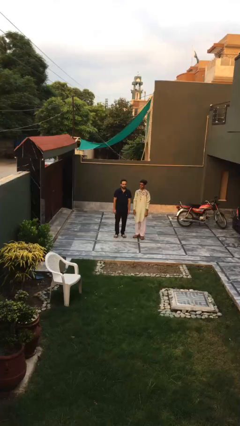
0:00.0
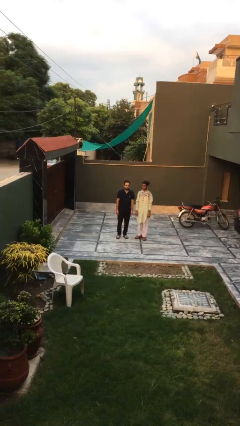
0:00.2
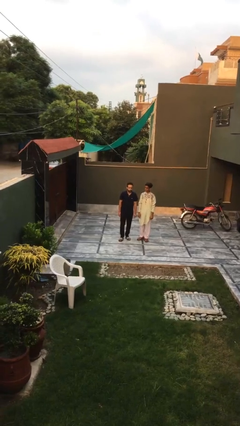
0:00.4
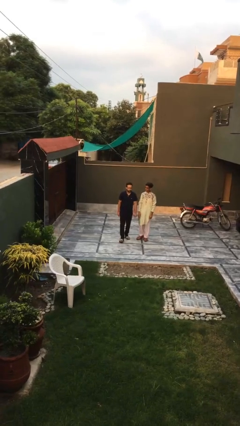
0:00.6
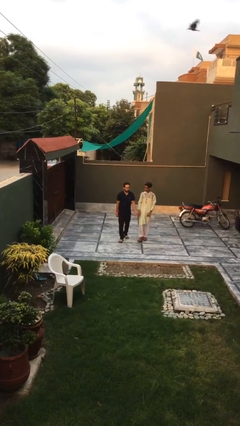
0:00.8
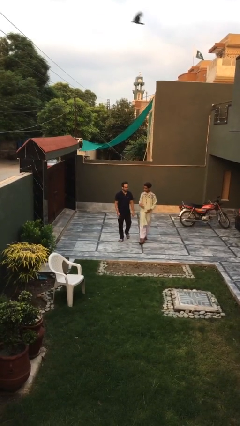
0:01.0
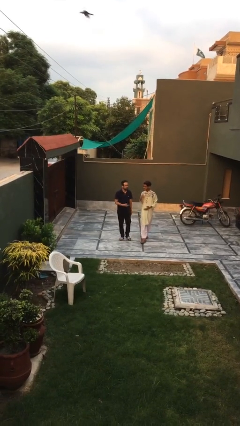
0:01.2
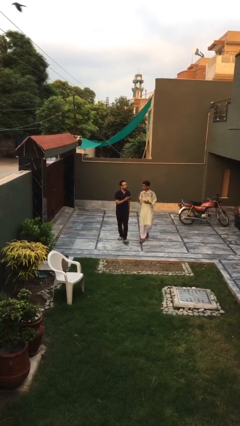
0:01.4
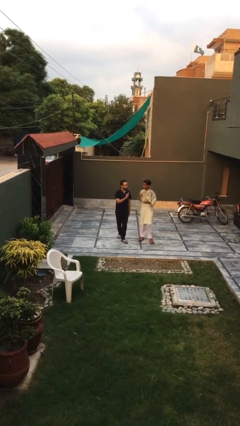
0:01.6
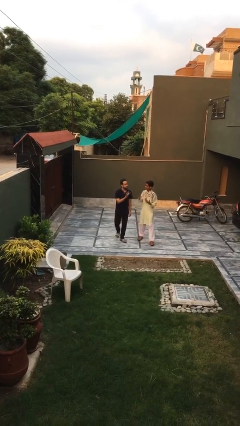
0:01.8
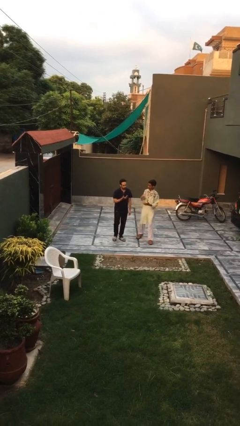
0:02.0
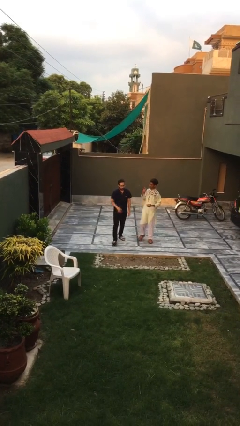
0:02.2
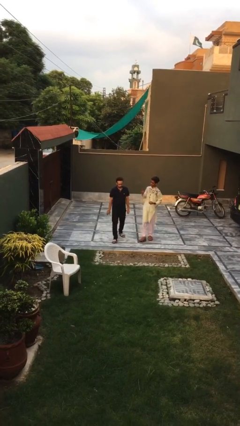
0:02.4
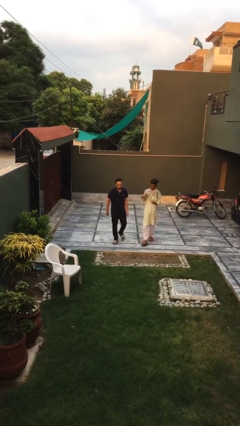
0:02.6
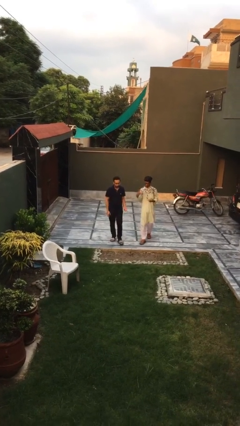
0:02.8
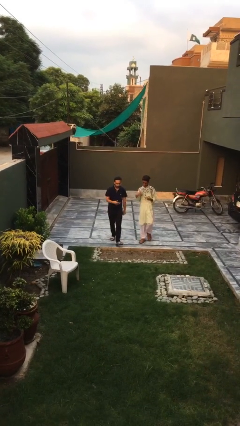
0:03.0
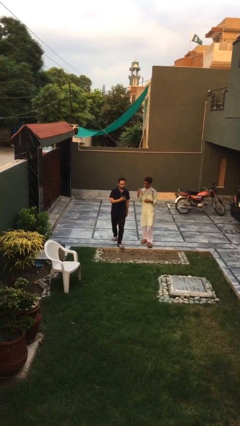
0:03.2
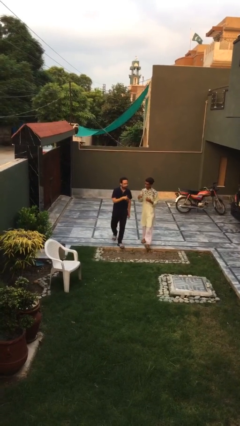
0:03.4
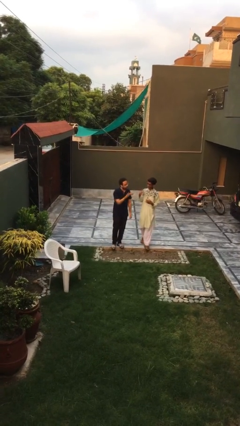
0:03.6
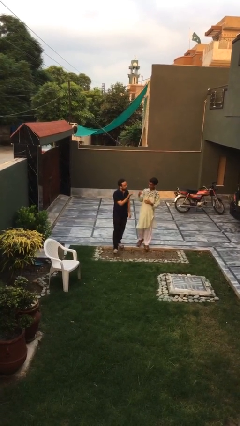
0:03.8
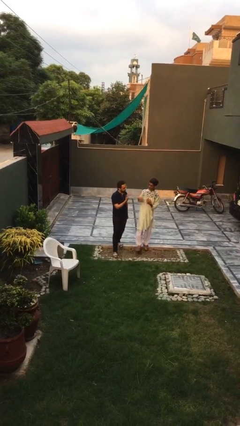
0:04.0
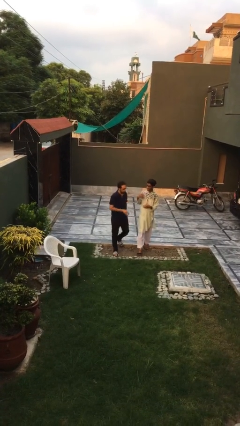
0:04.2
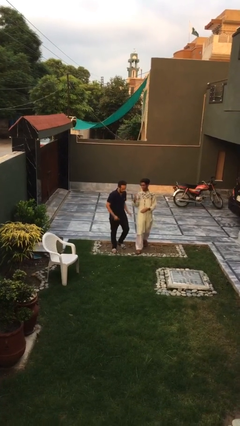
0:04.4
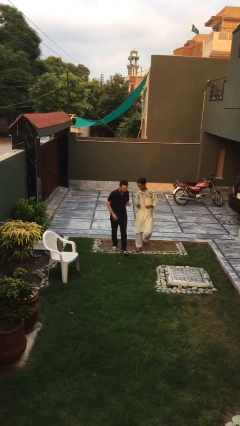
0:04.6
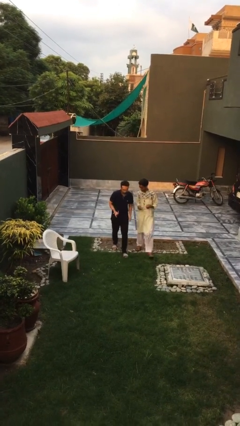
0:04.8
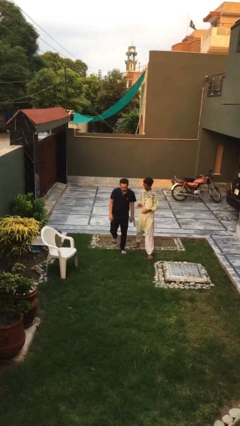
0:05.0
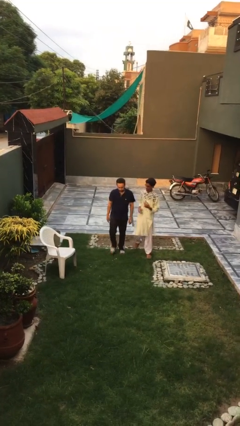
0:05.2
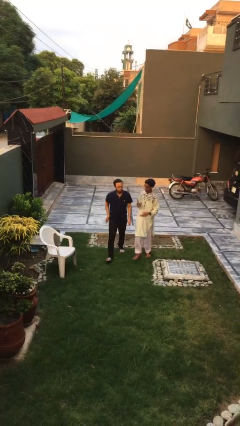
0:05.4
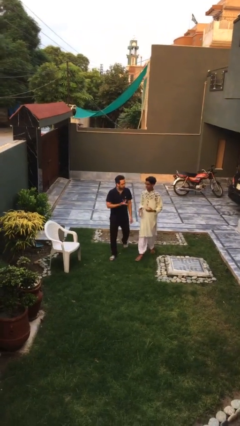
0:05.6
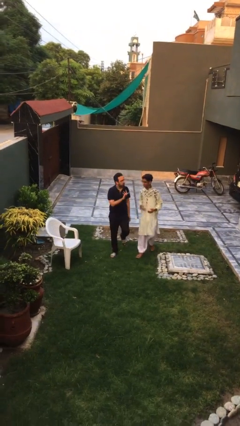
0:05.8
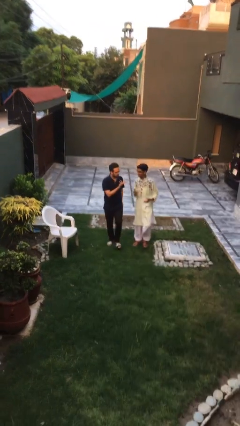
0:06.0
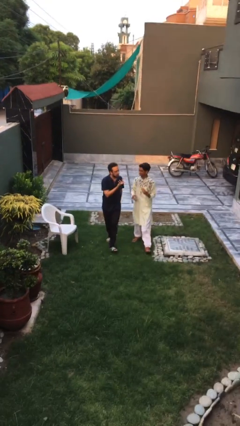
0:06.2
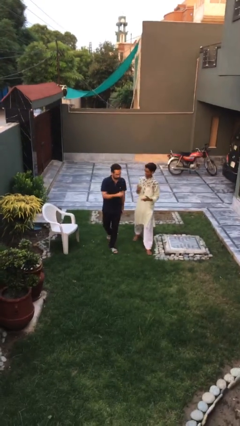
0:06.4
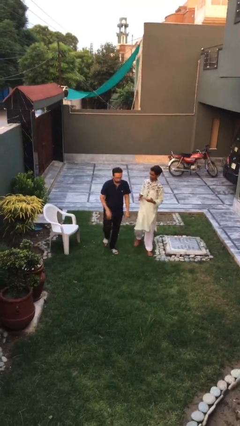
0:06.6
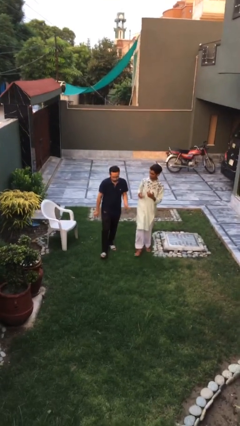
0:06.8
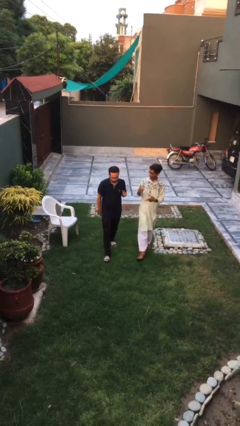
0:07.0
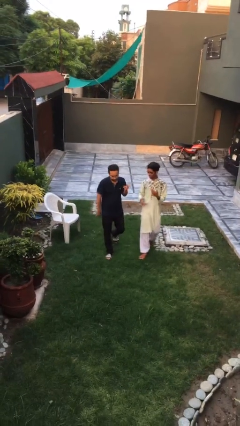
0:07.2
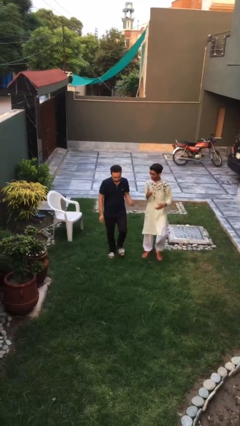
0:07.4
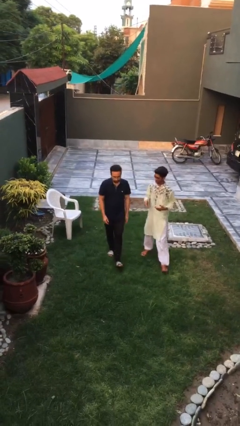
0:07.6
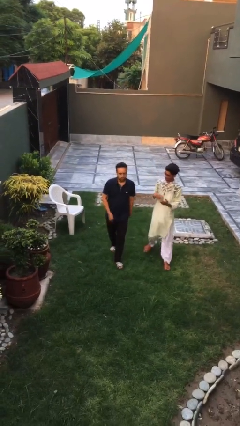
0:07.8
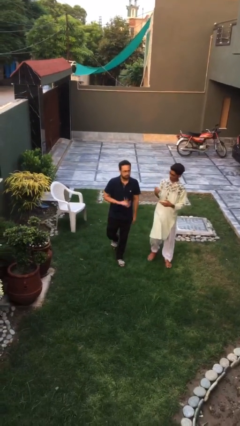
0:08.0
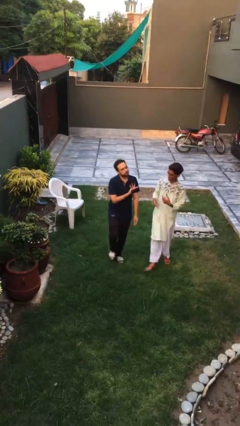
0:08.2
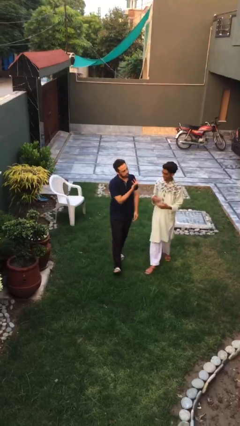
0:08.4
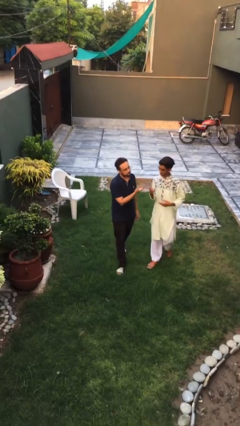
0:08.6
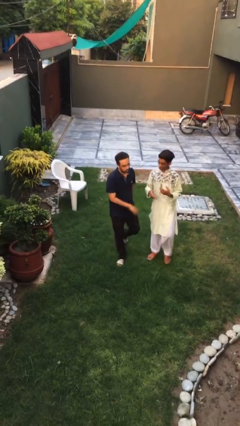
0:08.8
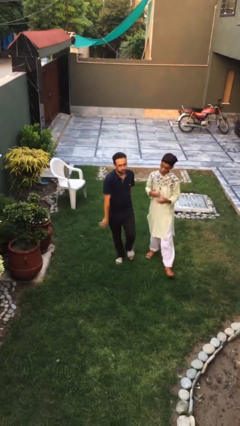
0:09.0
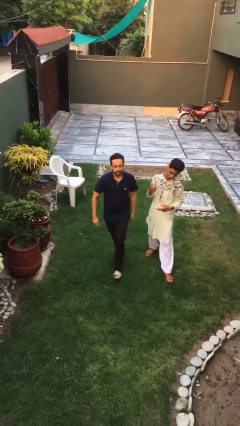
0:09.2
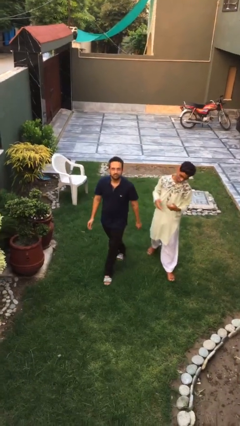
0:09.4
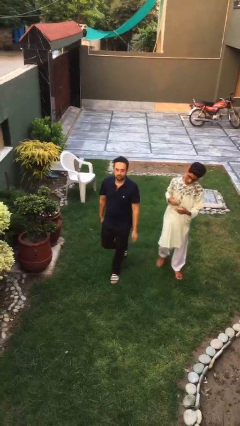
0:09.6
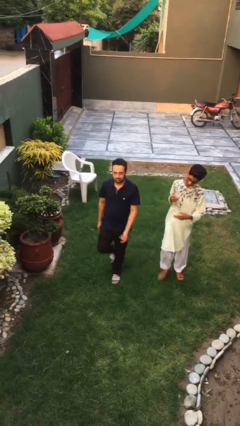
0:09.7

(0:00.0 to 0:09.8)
person talks to person

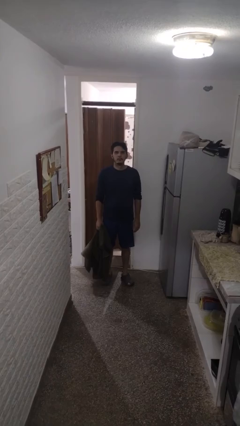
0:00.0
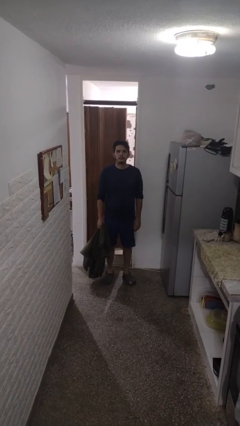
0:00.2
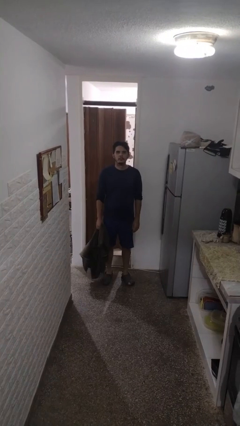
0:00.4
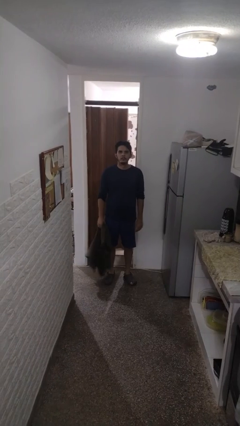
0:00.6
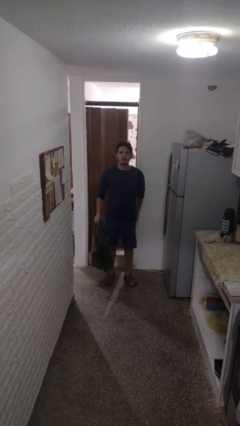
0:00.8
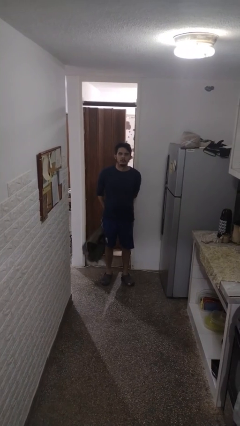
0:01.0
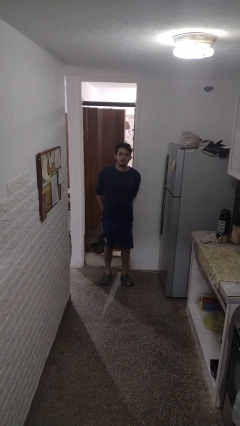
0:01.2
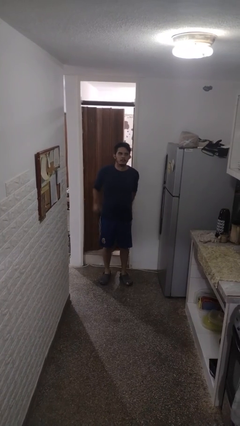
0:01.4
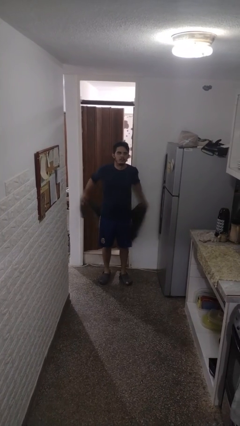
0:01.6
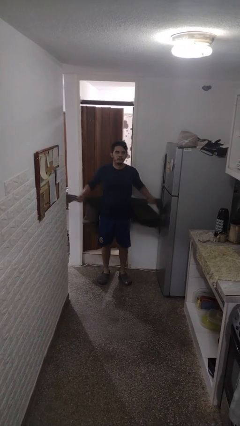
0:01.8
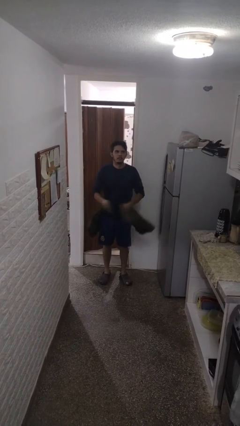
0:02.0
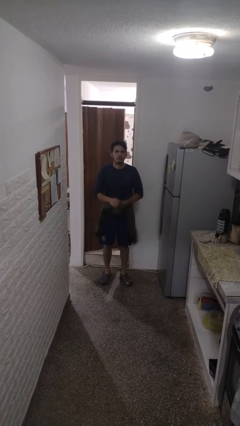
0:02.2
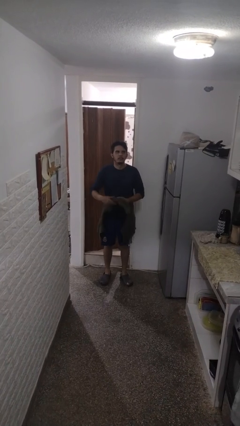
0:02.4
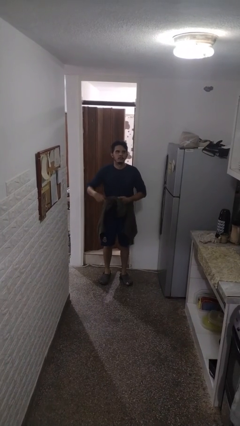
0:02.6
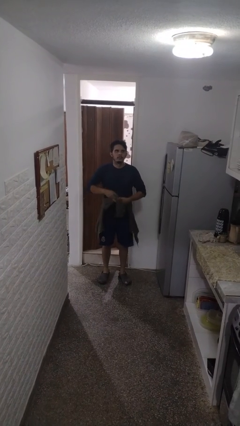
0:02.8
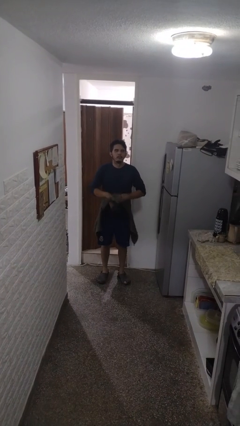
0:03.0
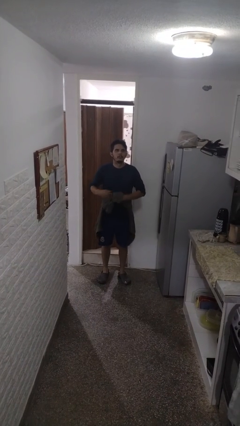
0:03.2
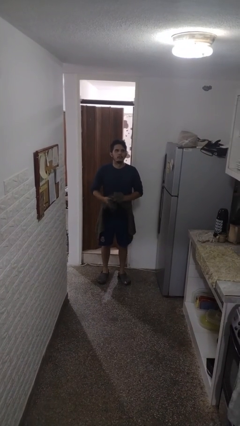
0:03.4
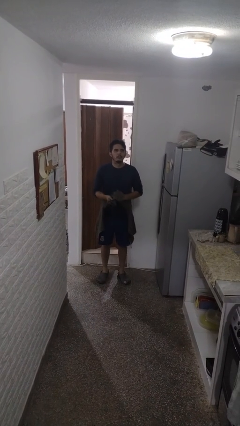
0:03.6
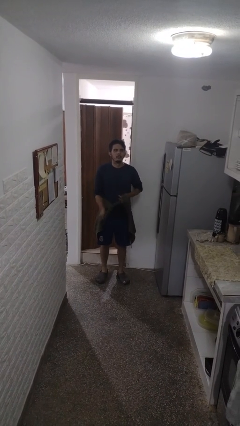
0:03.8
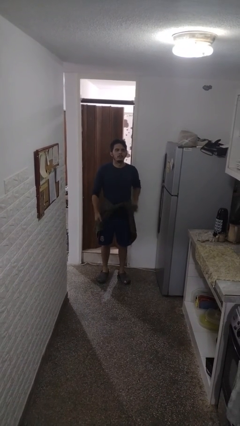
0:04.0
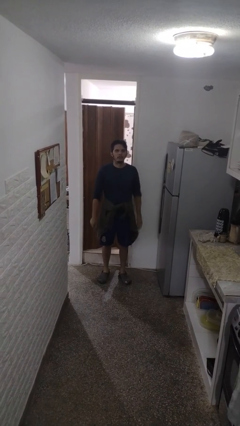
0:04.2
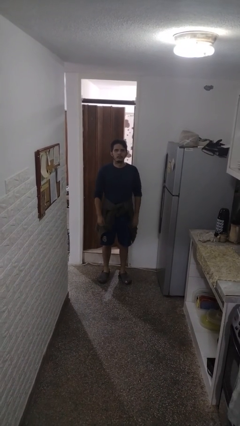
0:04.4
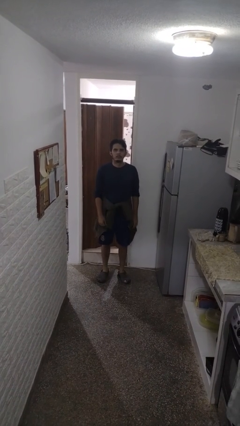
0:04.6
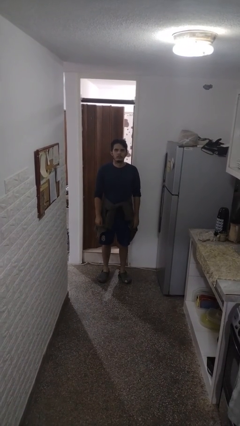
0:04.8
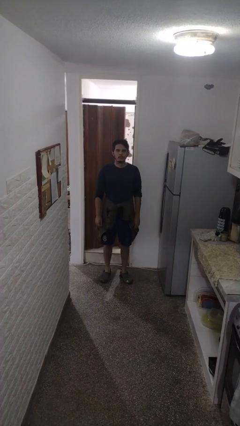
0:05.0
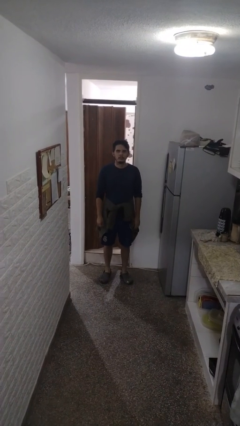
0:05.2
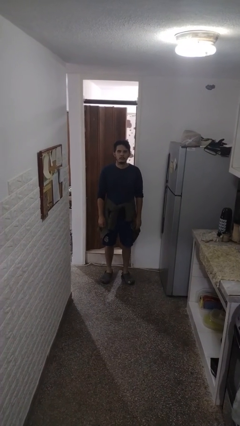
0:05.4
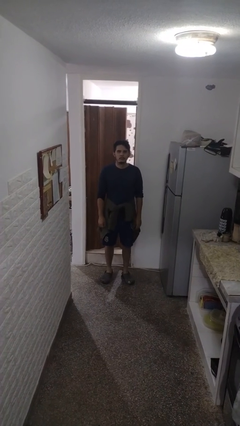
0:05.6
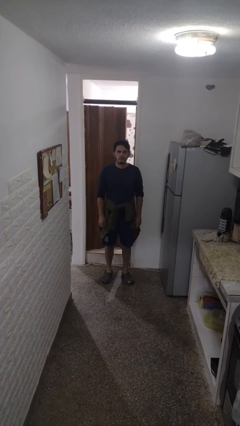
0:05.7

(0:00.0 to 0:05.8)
person ties jacket around waist

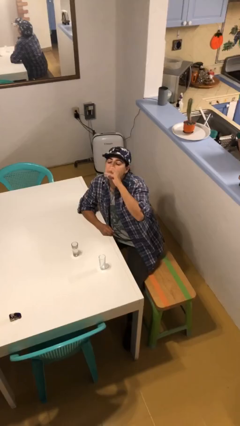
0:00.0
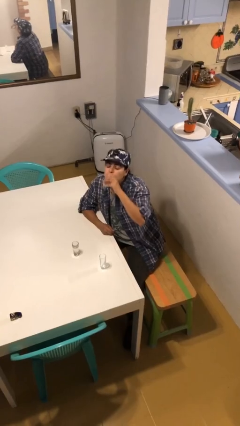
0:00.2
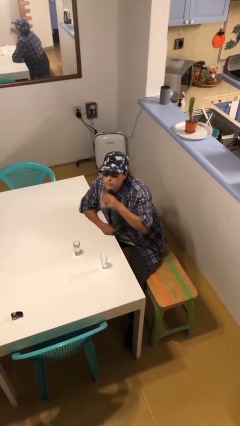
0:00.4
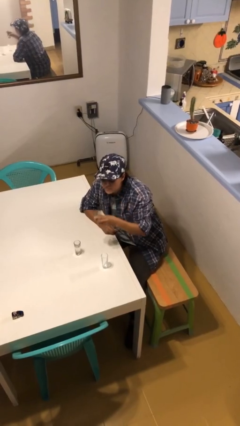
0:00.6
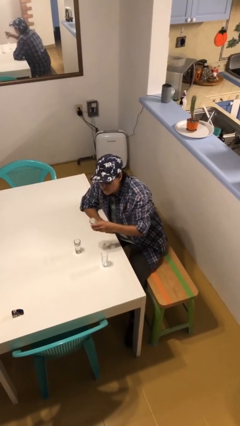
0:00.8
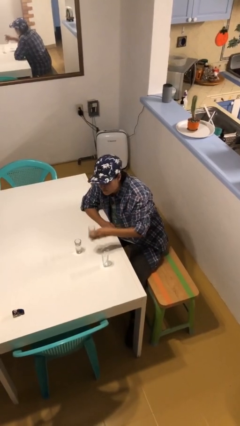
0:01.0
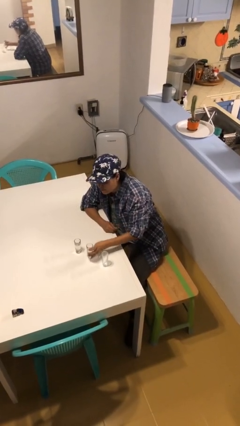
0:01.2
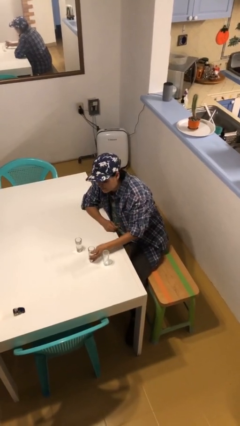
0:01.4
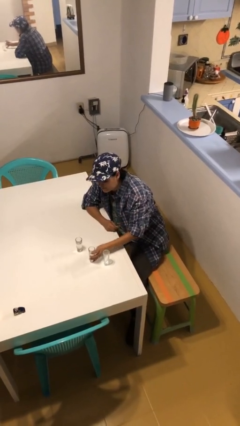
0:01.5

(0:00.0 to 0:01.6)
person puts down object on table

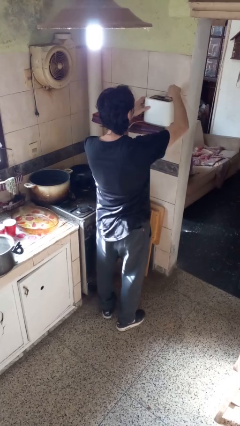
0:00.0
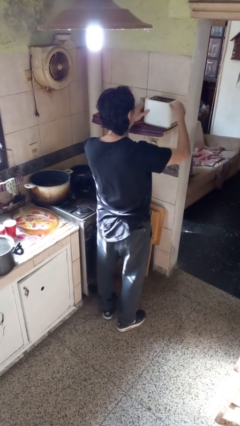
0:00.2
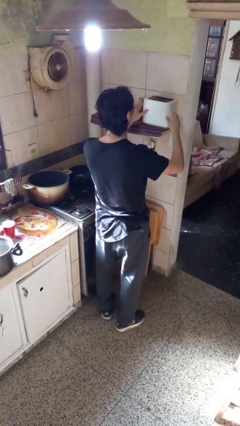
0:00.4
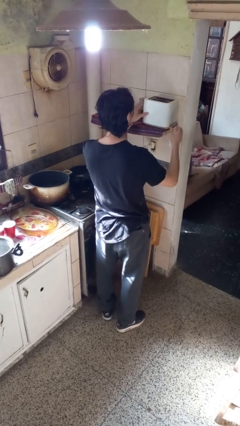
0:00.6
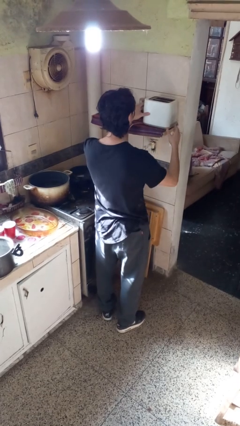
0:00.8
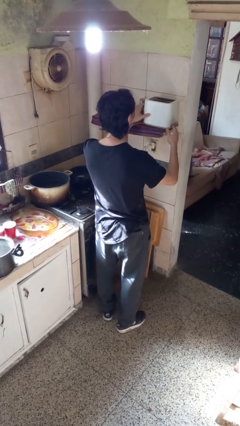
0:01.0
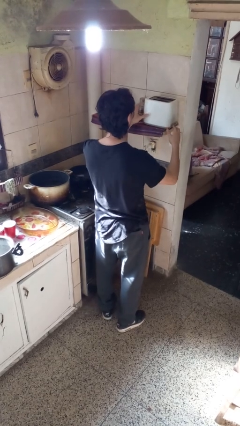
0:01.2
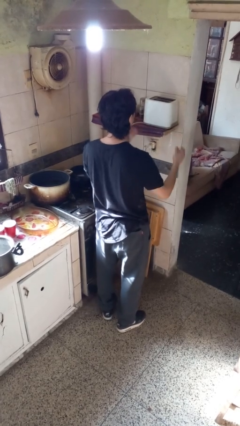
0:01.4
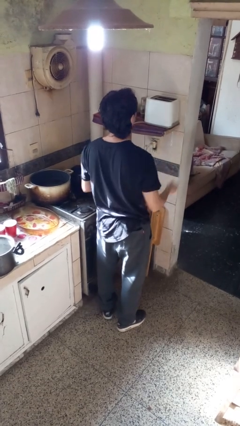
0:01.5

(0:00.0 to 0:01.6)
person puts object into toaster
